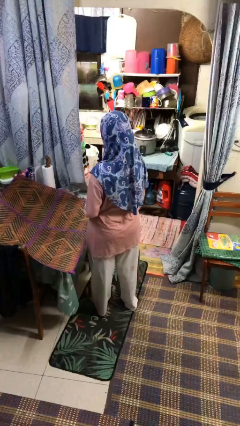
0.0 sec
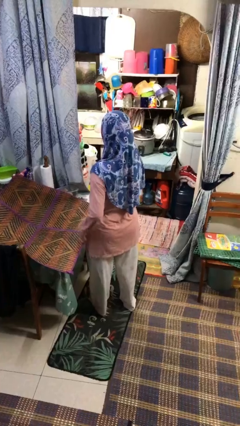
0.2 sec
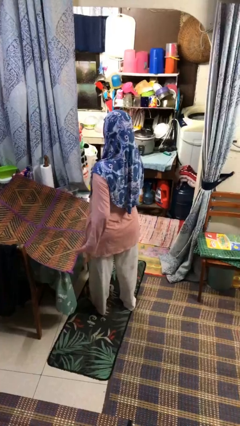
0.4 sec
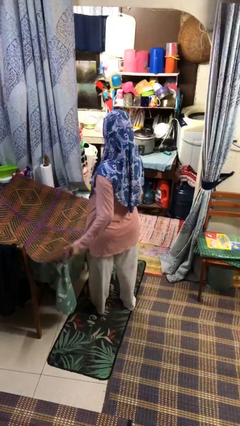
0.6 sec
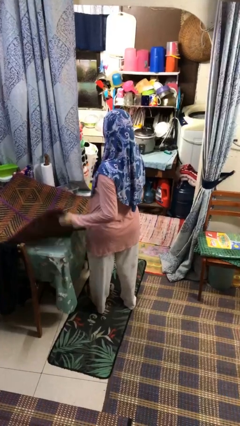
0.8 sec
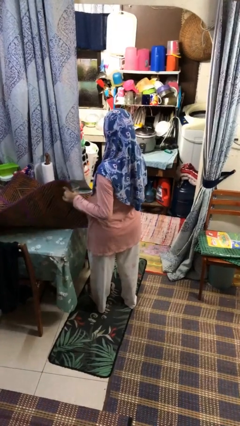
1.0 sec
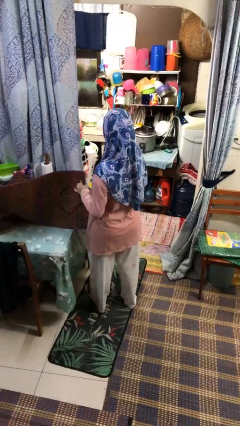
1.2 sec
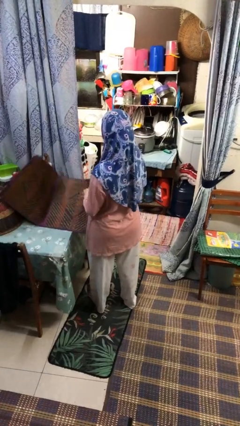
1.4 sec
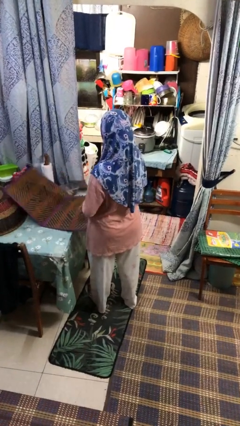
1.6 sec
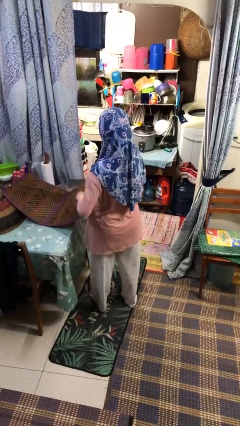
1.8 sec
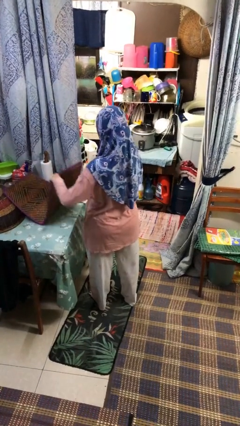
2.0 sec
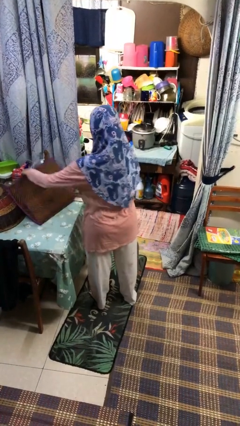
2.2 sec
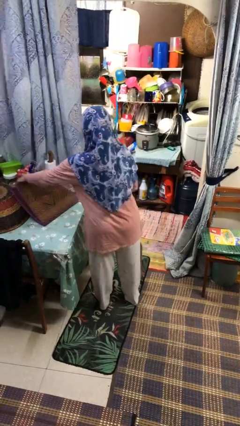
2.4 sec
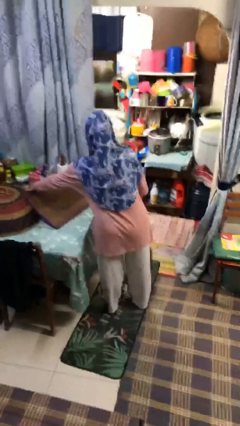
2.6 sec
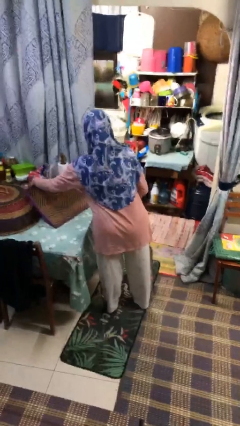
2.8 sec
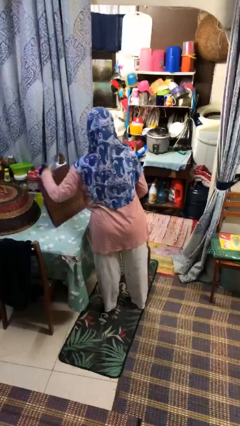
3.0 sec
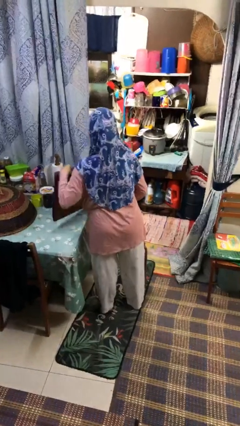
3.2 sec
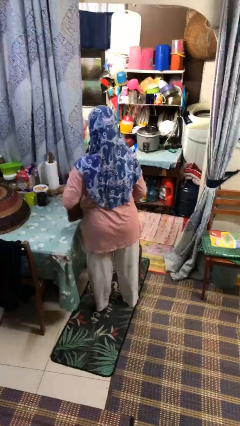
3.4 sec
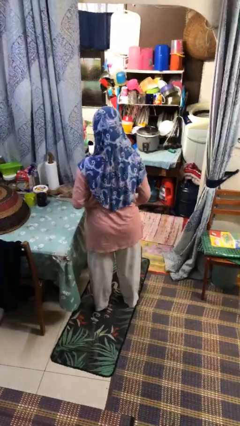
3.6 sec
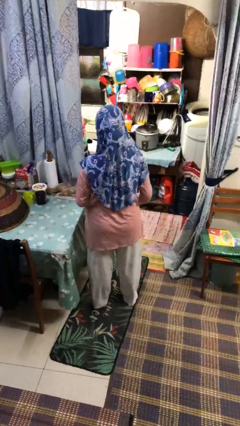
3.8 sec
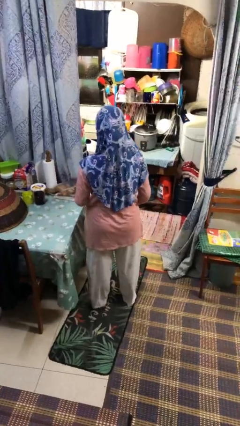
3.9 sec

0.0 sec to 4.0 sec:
person folds tablecloth

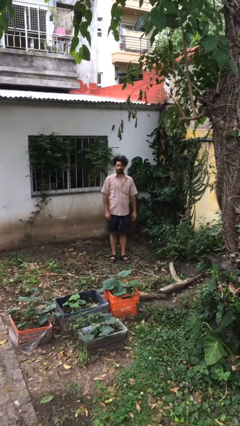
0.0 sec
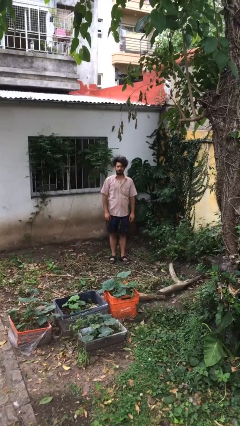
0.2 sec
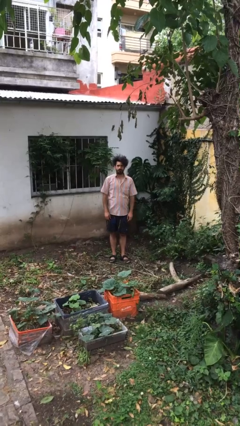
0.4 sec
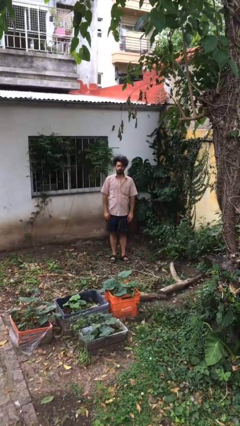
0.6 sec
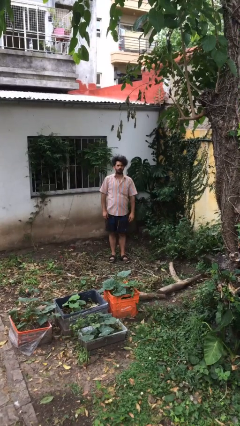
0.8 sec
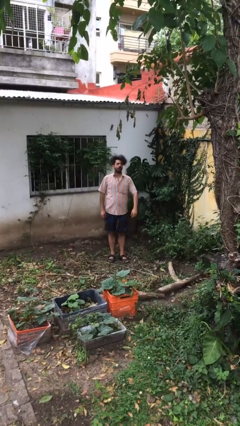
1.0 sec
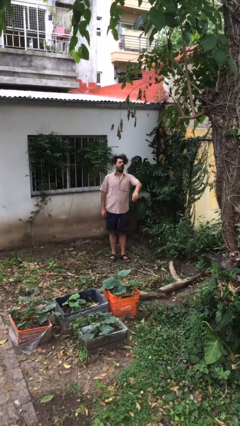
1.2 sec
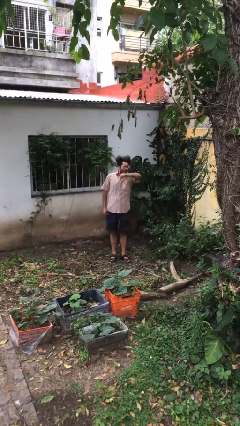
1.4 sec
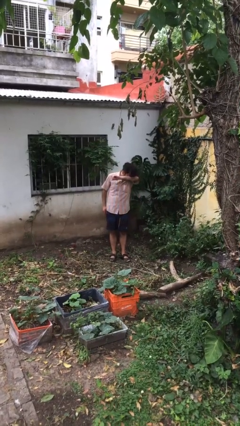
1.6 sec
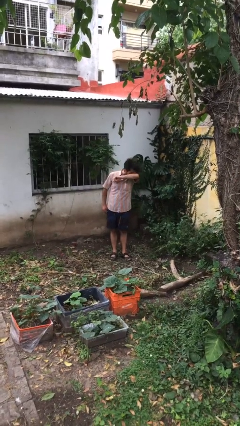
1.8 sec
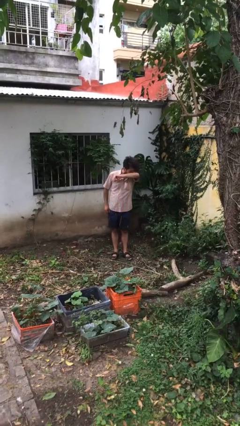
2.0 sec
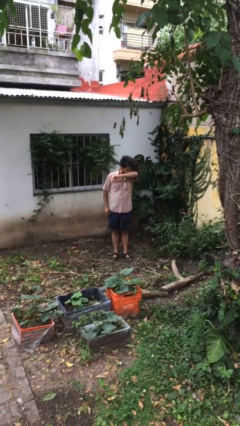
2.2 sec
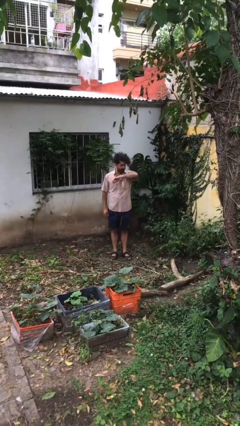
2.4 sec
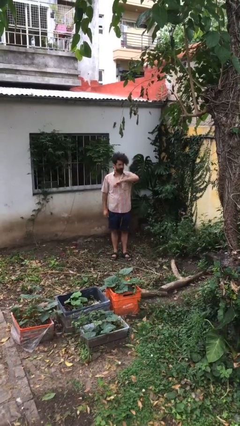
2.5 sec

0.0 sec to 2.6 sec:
person sneezes into arm

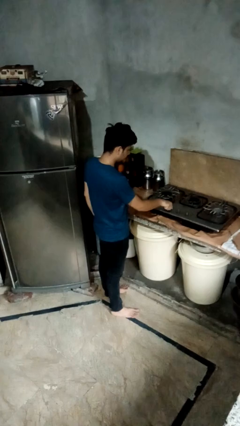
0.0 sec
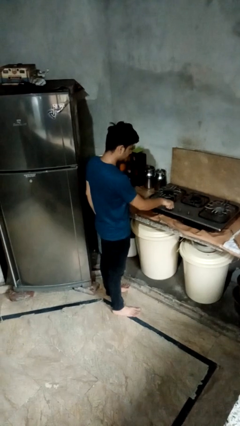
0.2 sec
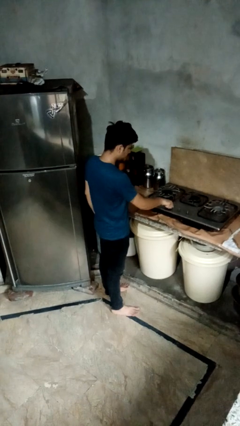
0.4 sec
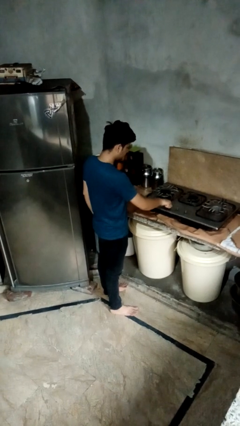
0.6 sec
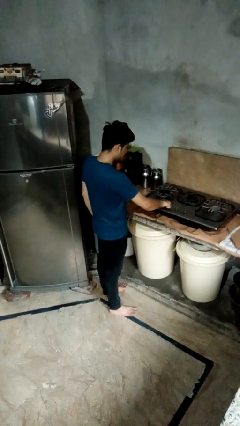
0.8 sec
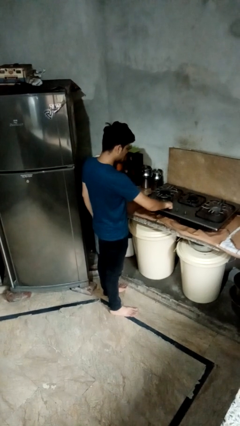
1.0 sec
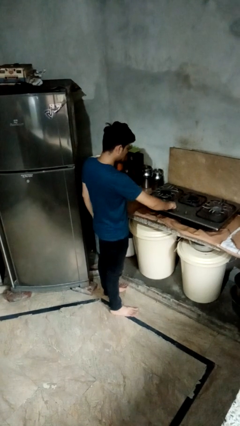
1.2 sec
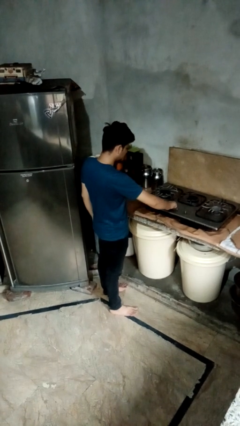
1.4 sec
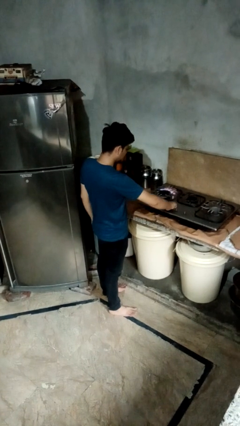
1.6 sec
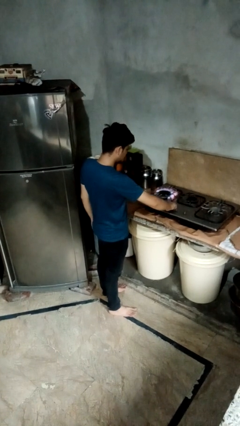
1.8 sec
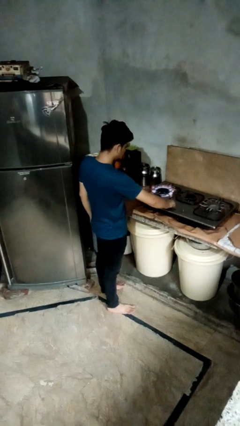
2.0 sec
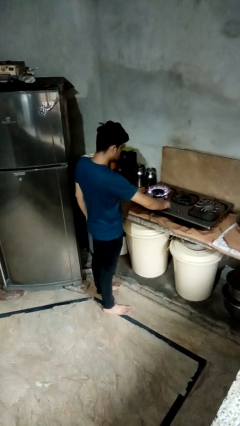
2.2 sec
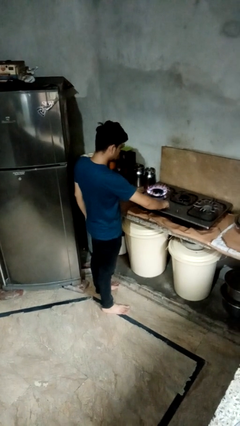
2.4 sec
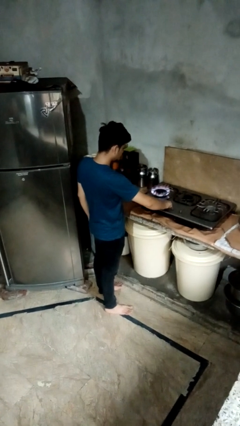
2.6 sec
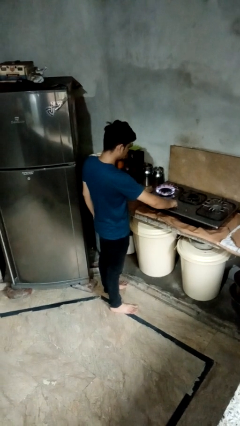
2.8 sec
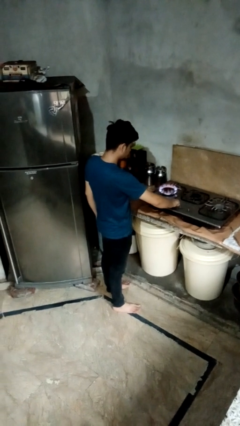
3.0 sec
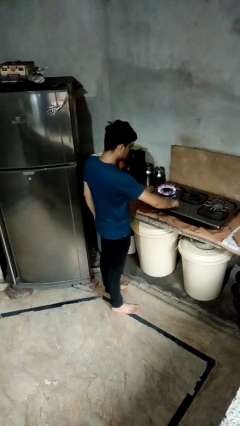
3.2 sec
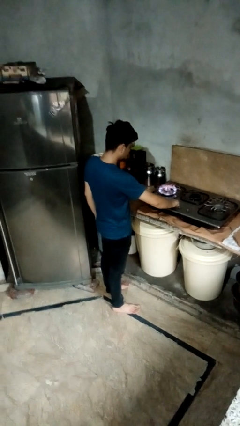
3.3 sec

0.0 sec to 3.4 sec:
person turns on stovetop

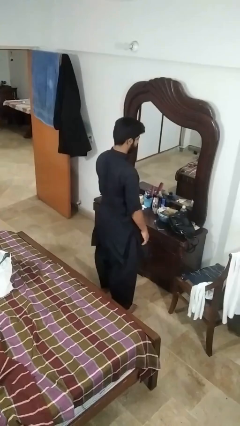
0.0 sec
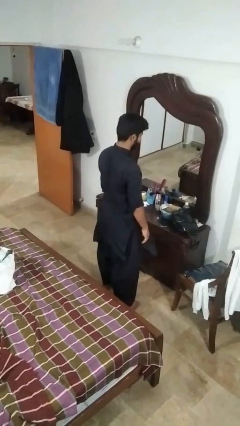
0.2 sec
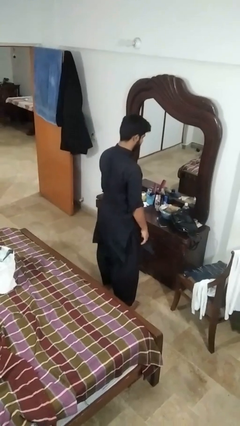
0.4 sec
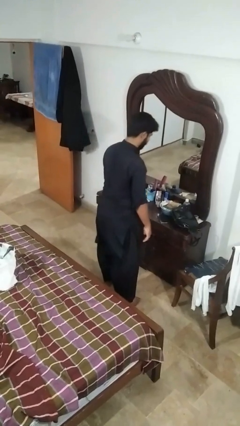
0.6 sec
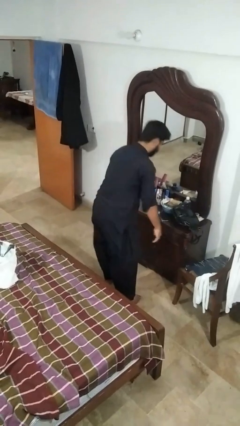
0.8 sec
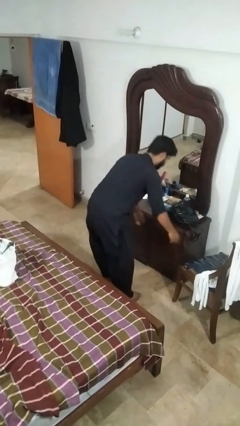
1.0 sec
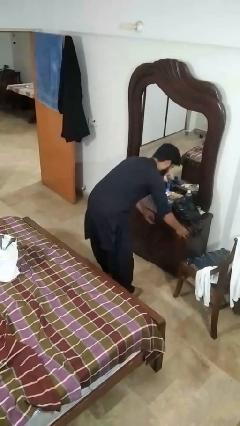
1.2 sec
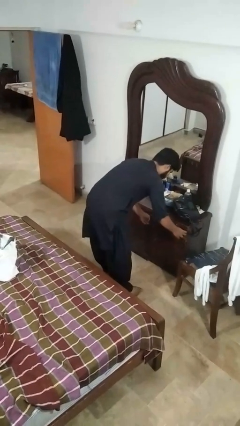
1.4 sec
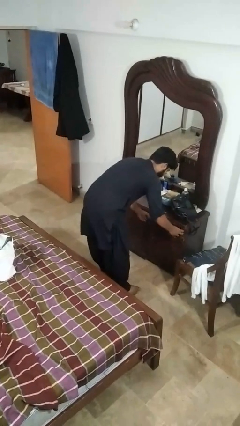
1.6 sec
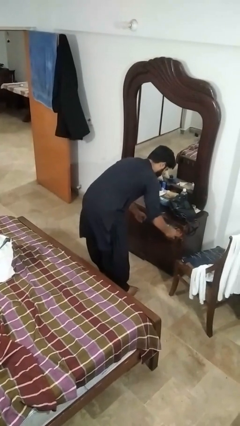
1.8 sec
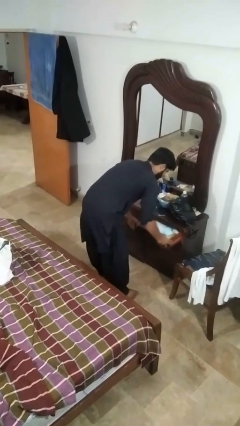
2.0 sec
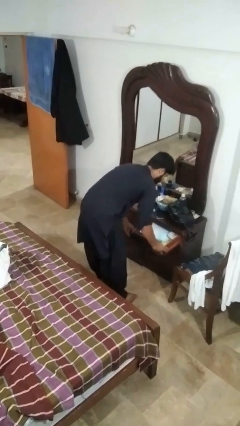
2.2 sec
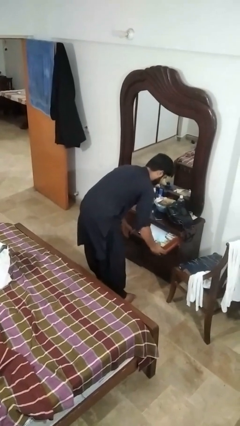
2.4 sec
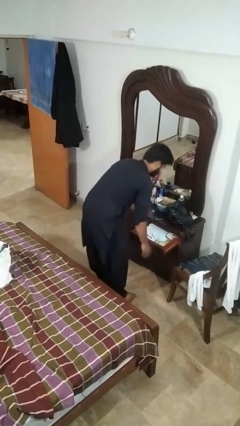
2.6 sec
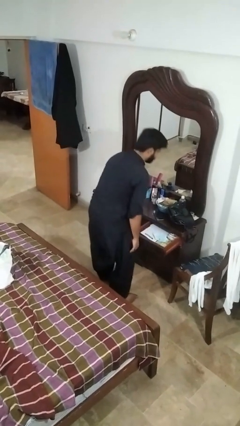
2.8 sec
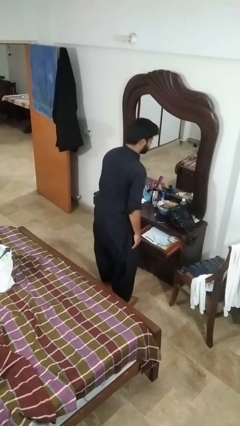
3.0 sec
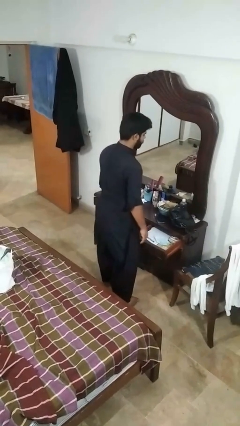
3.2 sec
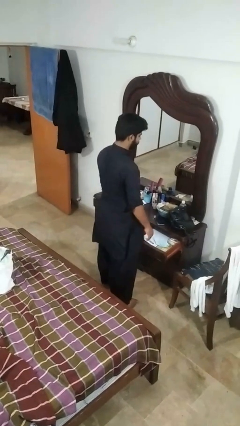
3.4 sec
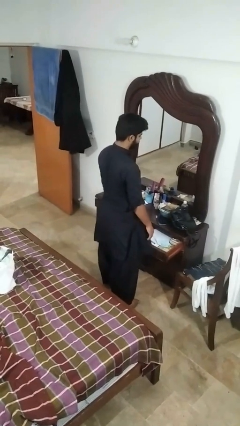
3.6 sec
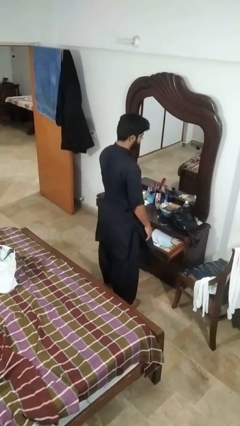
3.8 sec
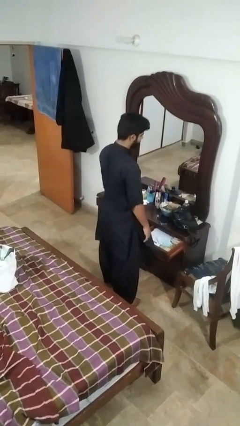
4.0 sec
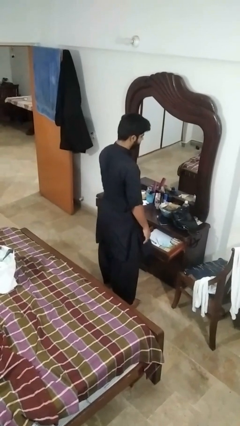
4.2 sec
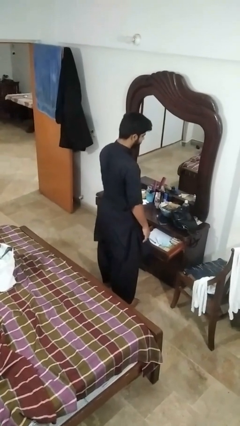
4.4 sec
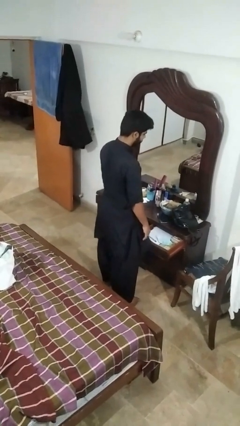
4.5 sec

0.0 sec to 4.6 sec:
person opens dresser drawer

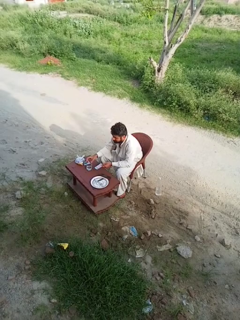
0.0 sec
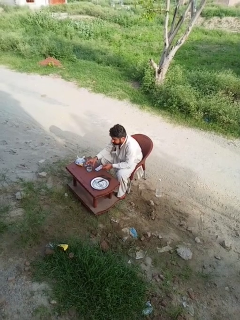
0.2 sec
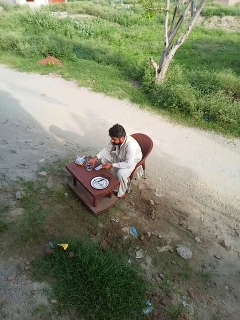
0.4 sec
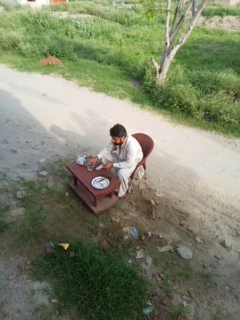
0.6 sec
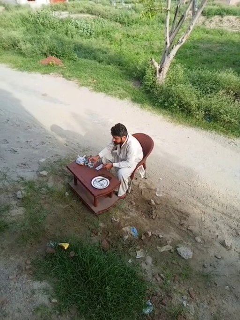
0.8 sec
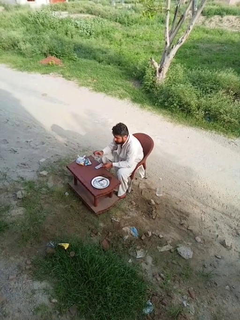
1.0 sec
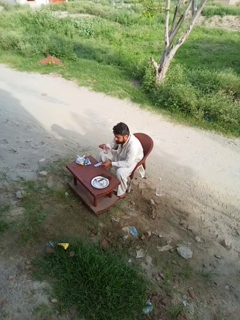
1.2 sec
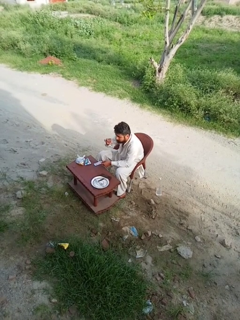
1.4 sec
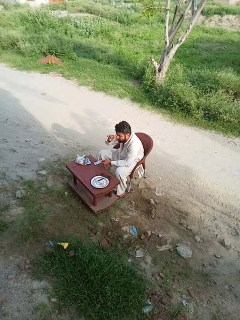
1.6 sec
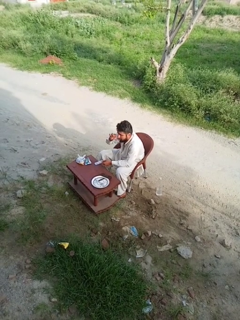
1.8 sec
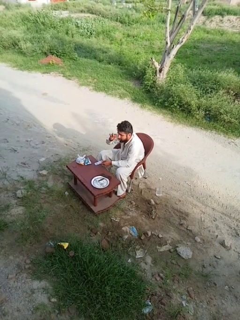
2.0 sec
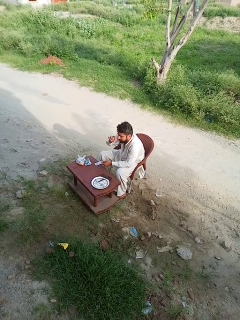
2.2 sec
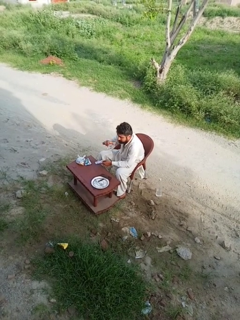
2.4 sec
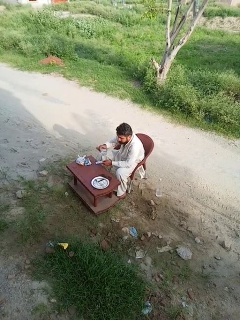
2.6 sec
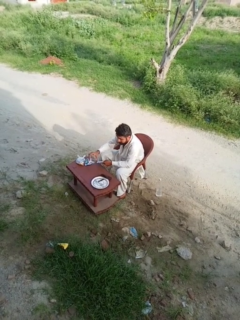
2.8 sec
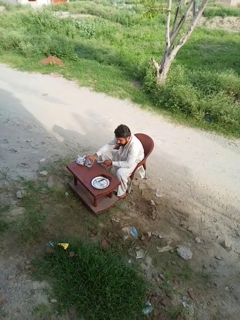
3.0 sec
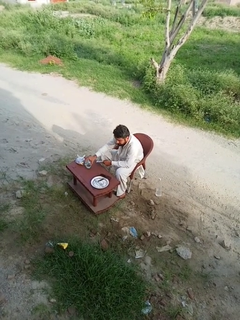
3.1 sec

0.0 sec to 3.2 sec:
person drinks from cup

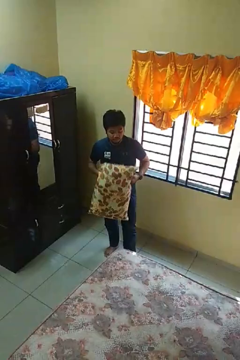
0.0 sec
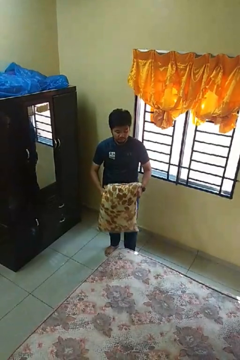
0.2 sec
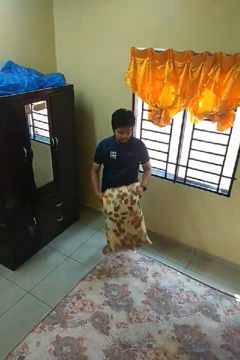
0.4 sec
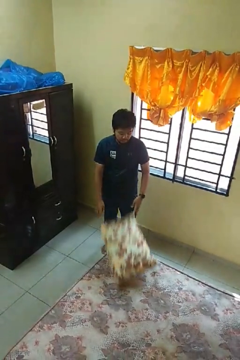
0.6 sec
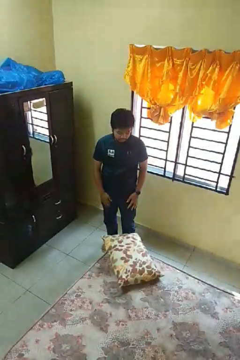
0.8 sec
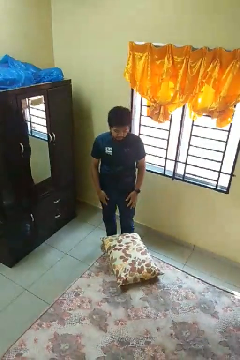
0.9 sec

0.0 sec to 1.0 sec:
person puts down object on bed
